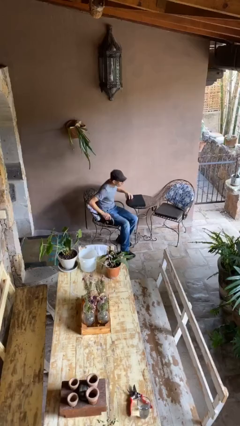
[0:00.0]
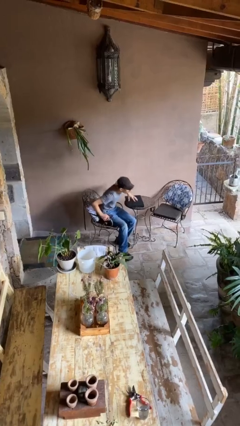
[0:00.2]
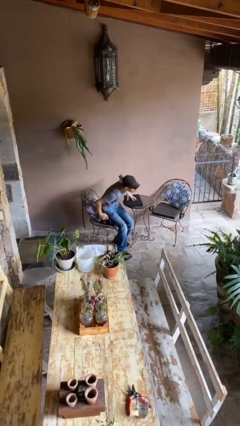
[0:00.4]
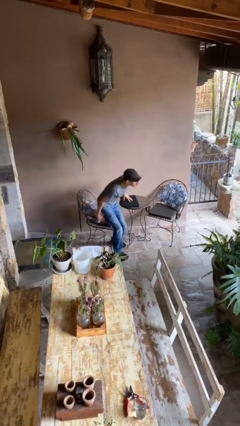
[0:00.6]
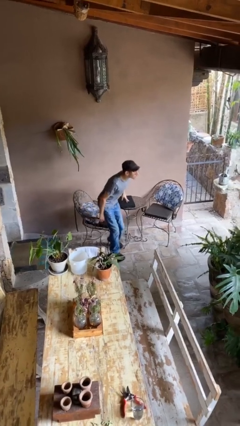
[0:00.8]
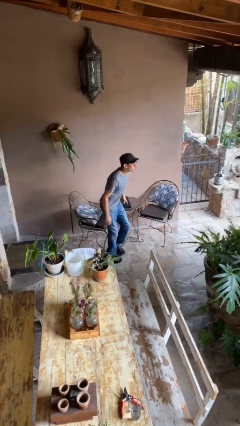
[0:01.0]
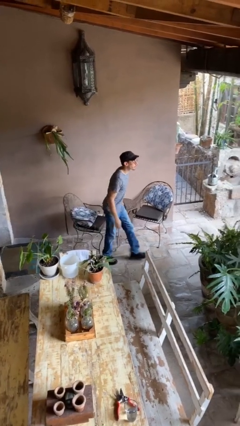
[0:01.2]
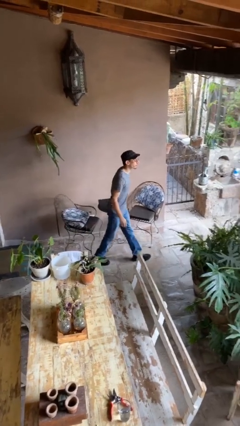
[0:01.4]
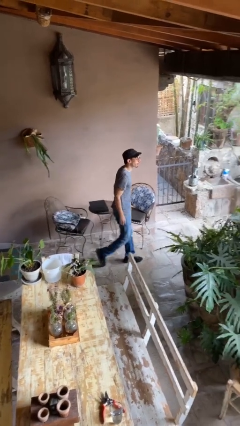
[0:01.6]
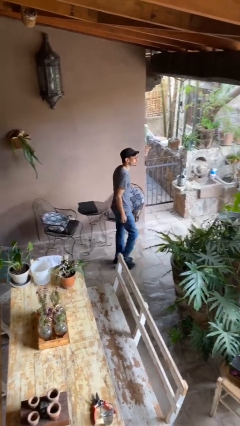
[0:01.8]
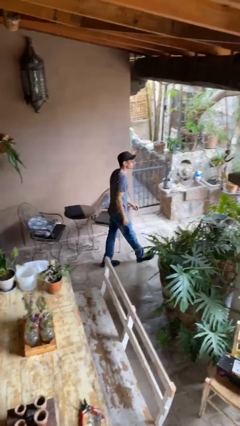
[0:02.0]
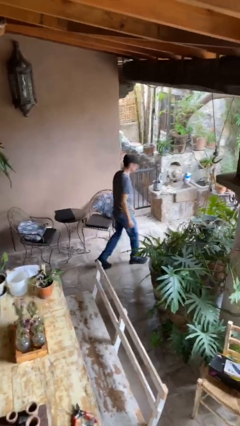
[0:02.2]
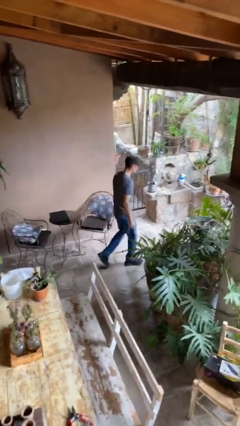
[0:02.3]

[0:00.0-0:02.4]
person stands up

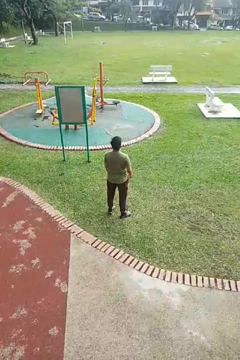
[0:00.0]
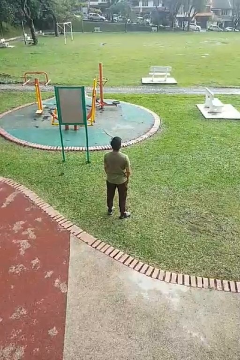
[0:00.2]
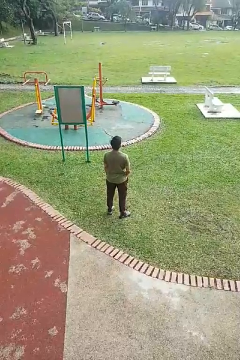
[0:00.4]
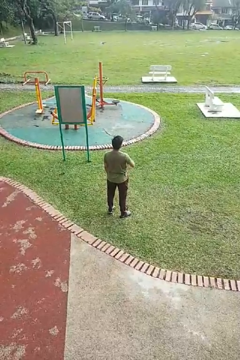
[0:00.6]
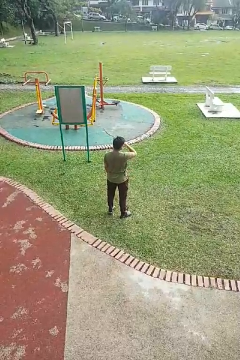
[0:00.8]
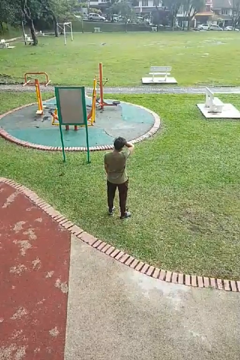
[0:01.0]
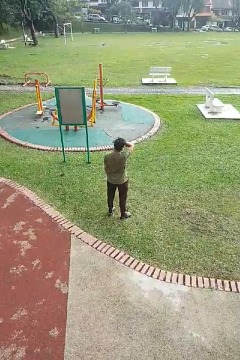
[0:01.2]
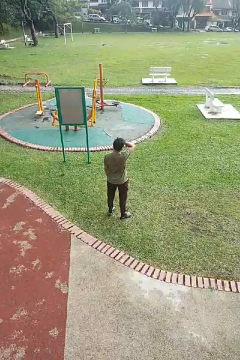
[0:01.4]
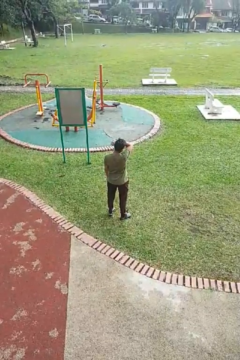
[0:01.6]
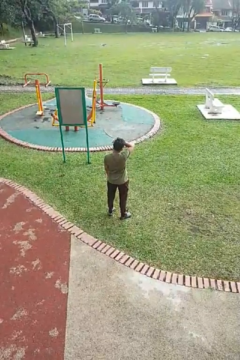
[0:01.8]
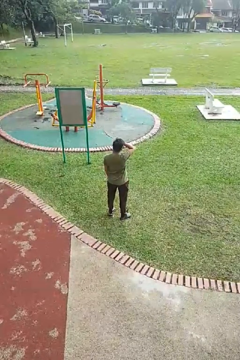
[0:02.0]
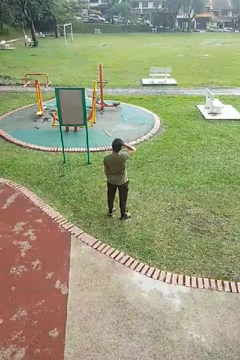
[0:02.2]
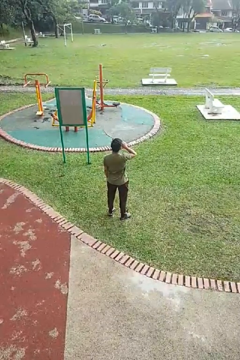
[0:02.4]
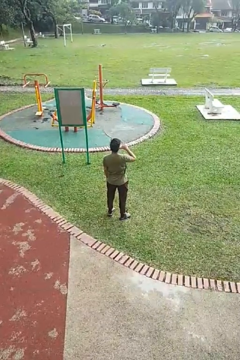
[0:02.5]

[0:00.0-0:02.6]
person rubs eyes

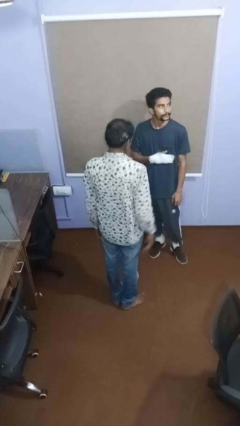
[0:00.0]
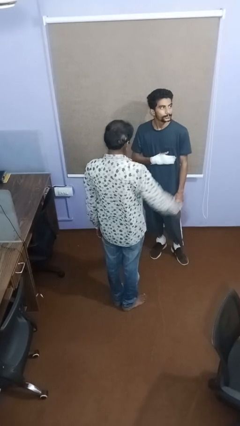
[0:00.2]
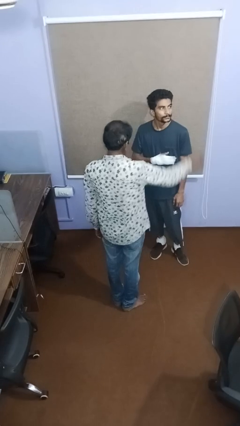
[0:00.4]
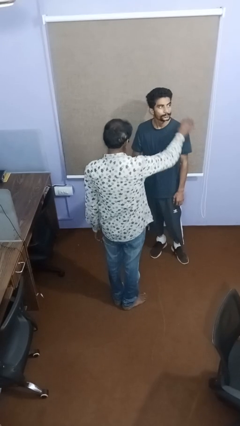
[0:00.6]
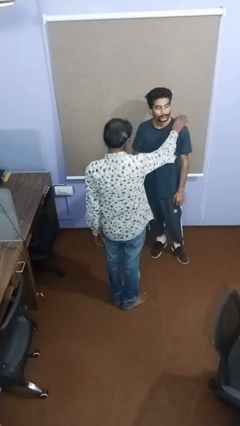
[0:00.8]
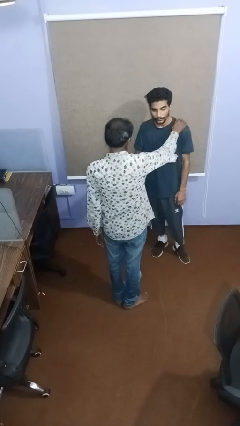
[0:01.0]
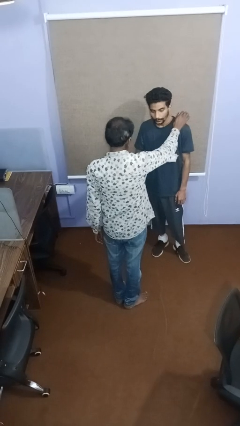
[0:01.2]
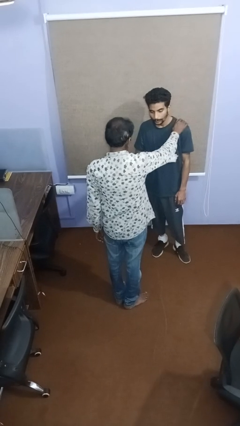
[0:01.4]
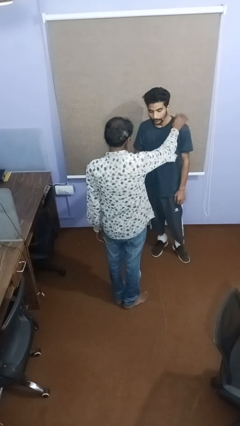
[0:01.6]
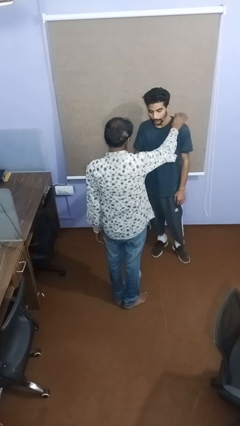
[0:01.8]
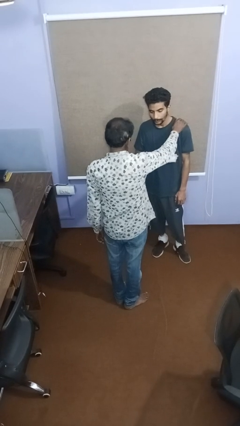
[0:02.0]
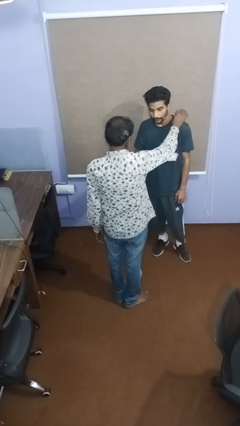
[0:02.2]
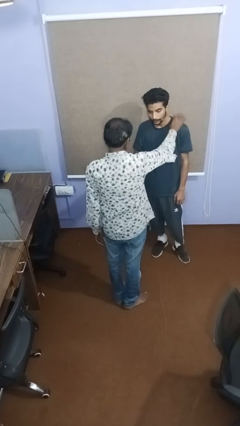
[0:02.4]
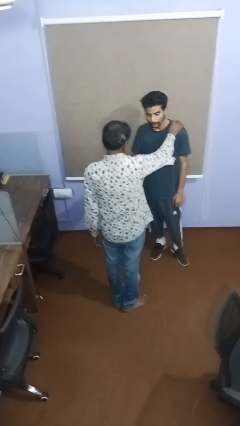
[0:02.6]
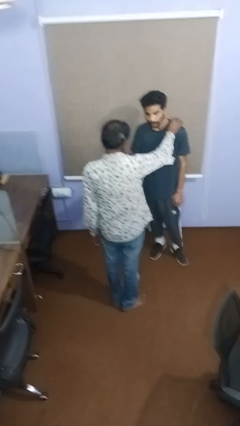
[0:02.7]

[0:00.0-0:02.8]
person pounds shoulders of person

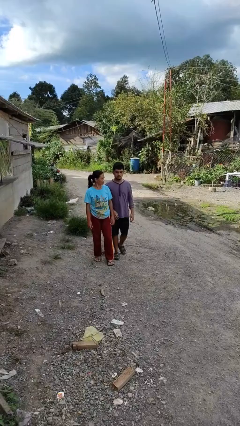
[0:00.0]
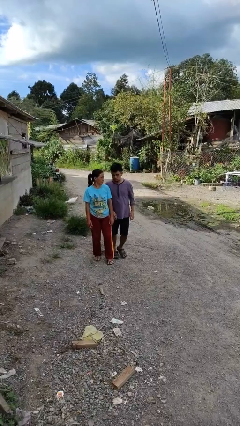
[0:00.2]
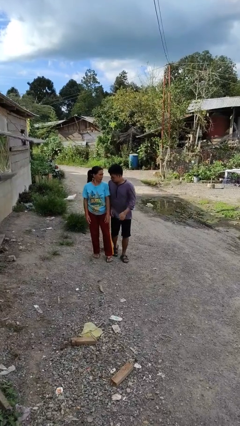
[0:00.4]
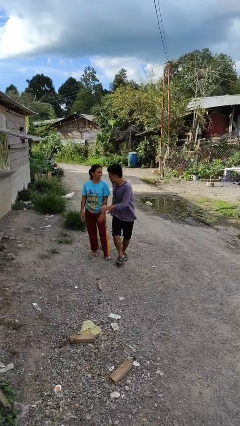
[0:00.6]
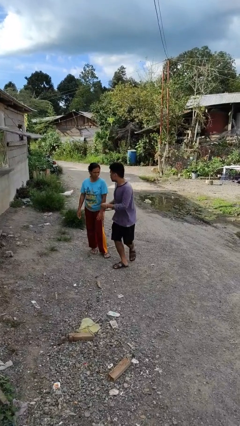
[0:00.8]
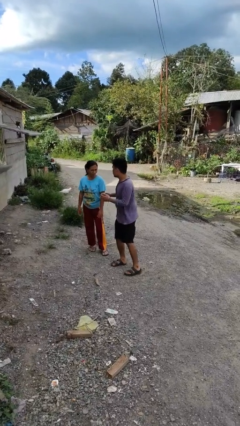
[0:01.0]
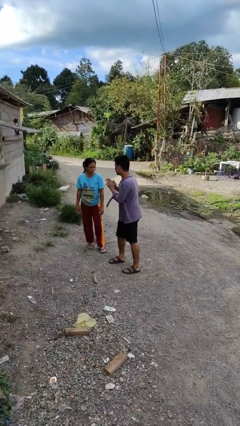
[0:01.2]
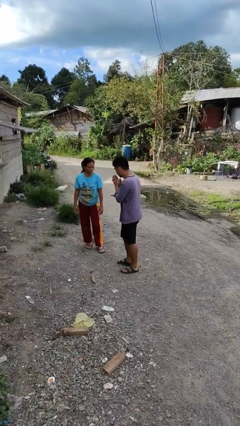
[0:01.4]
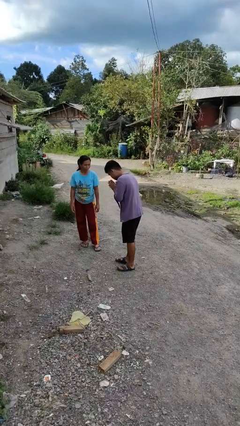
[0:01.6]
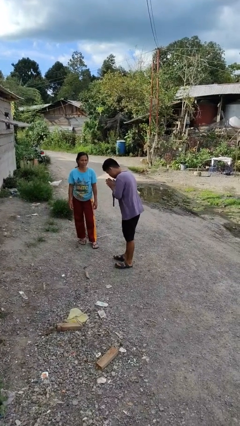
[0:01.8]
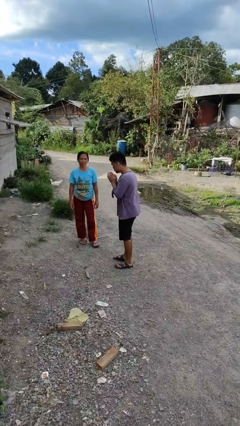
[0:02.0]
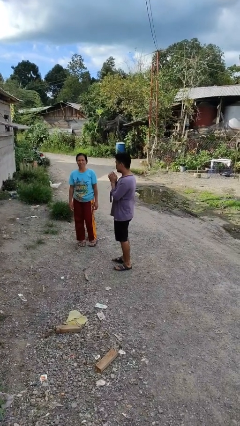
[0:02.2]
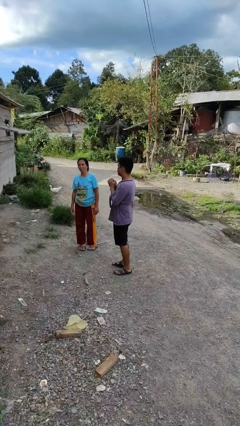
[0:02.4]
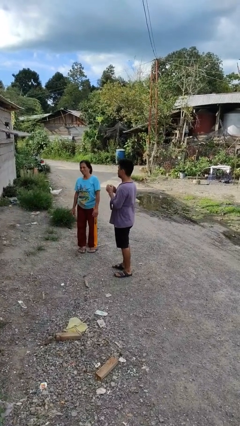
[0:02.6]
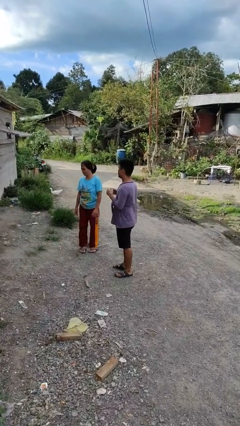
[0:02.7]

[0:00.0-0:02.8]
person bumps into person

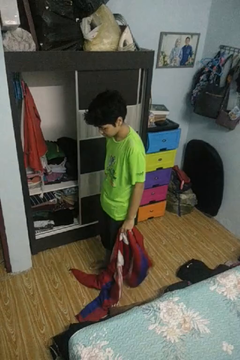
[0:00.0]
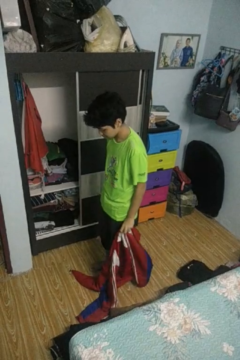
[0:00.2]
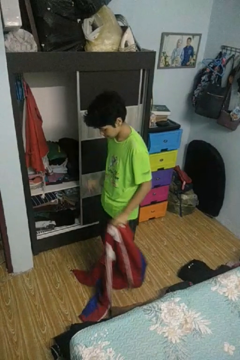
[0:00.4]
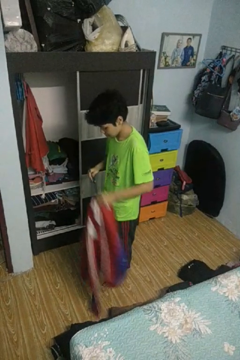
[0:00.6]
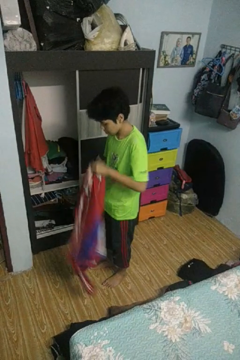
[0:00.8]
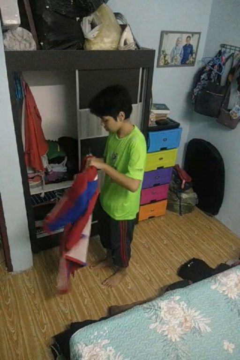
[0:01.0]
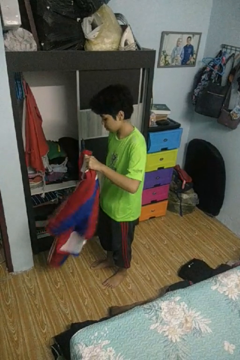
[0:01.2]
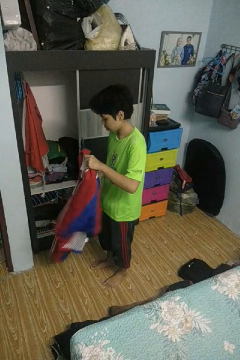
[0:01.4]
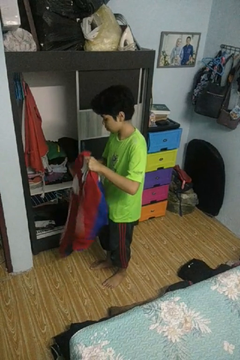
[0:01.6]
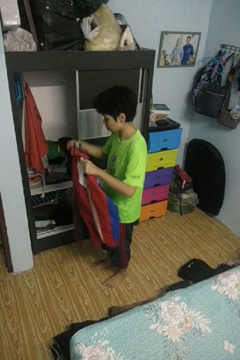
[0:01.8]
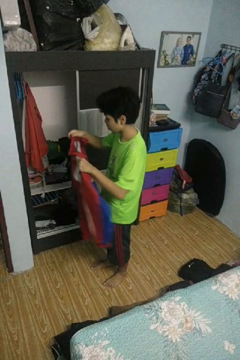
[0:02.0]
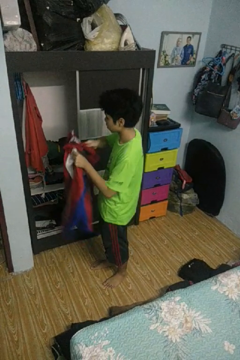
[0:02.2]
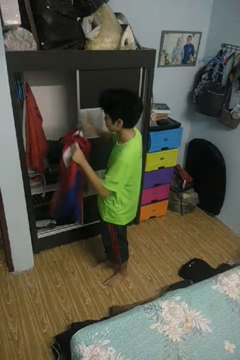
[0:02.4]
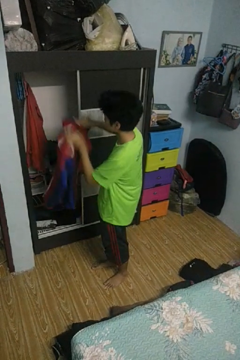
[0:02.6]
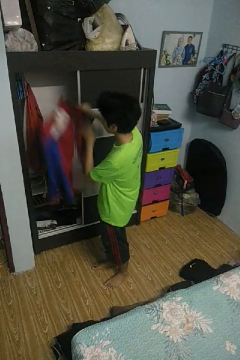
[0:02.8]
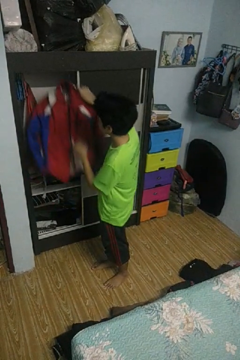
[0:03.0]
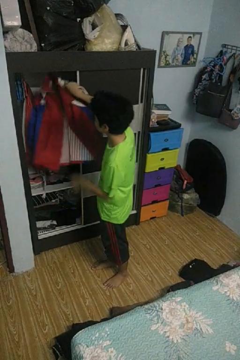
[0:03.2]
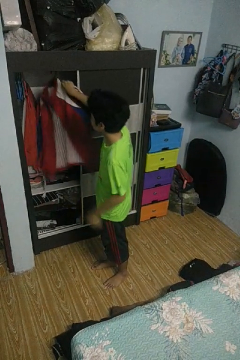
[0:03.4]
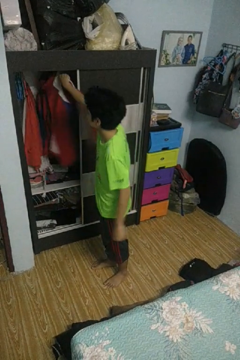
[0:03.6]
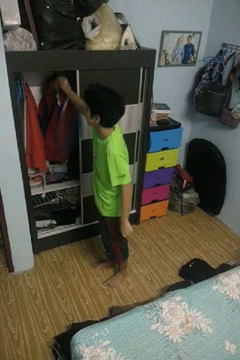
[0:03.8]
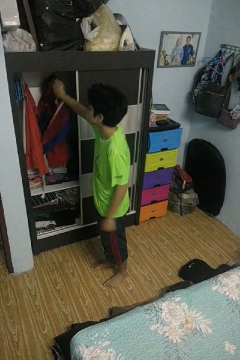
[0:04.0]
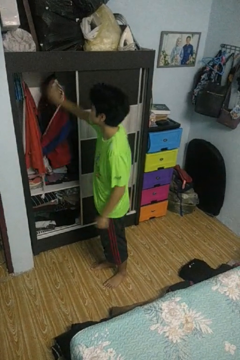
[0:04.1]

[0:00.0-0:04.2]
person puts clothes into closet

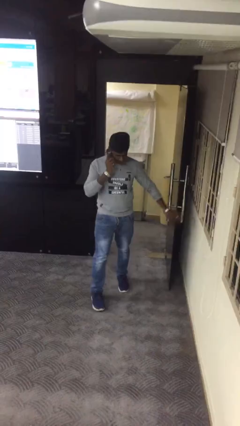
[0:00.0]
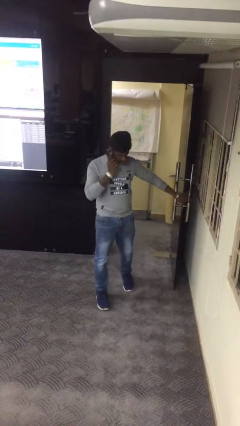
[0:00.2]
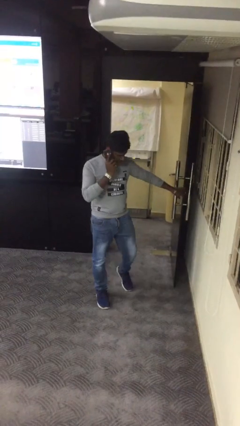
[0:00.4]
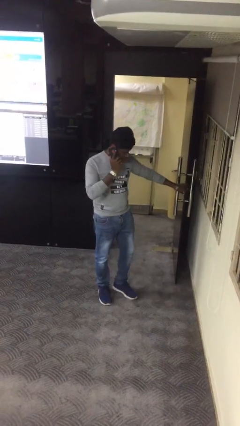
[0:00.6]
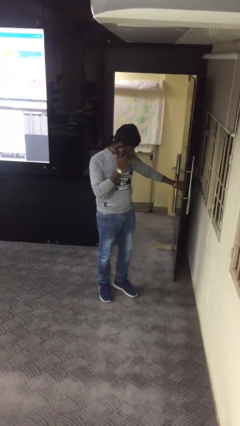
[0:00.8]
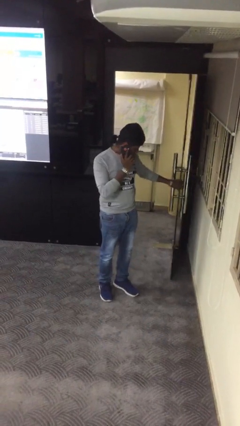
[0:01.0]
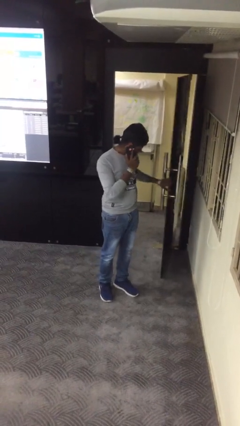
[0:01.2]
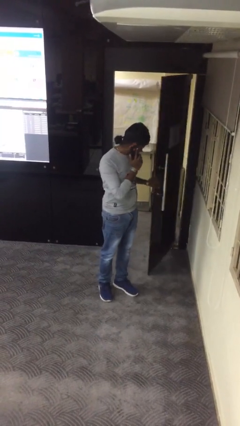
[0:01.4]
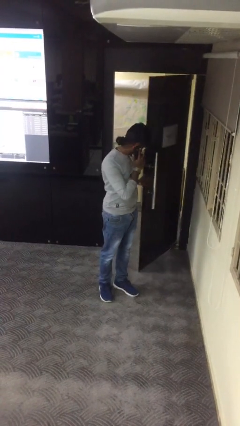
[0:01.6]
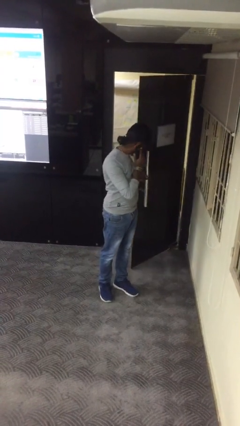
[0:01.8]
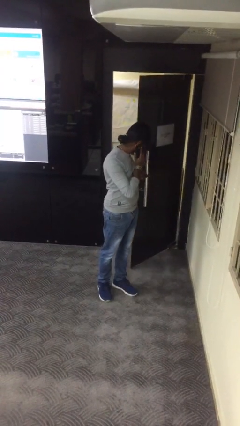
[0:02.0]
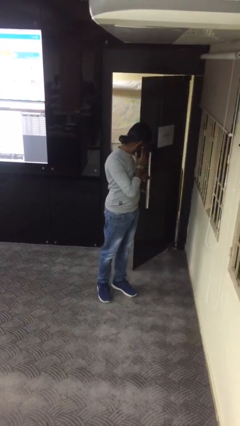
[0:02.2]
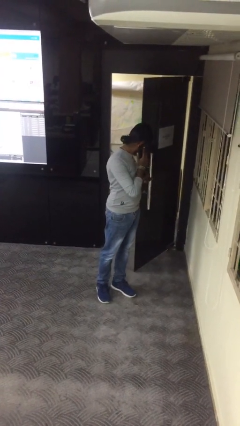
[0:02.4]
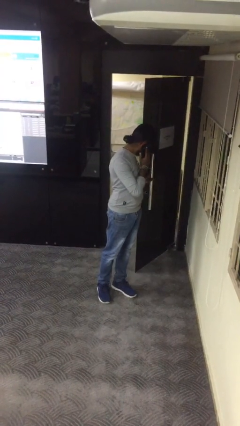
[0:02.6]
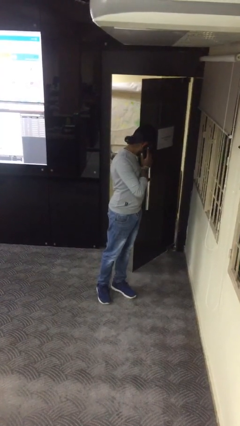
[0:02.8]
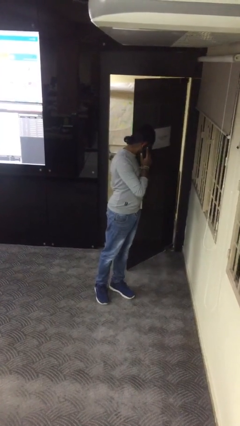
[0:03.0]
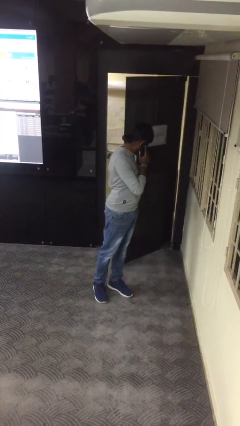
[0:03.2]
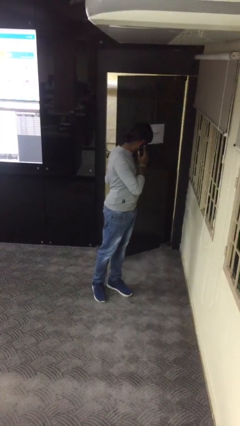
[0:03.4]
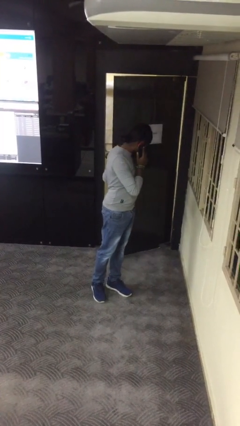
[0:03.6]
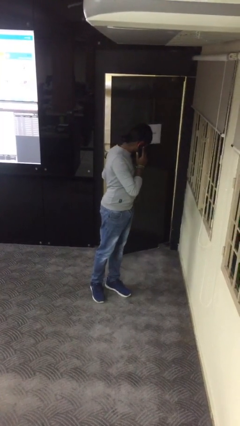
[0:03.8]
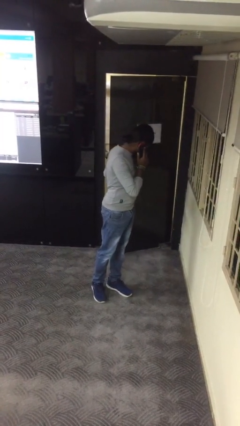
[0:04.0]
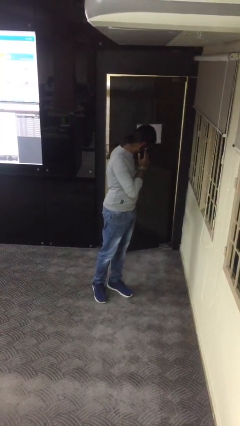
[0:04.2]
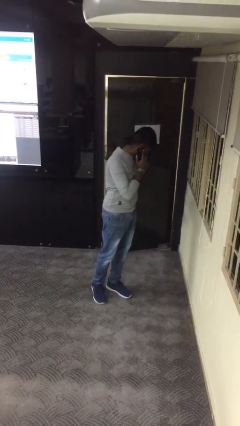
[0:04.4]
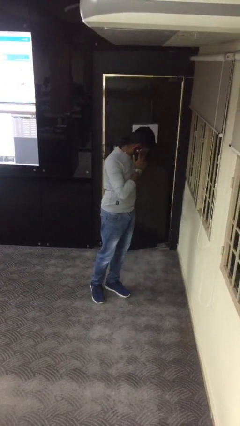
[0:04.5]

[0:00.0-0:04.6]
person closes facility door
